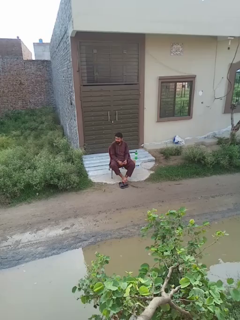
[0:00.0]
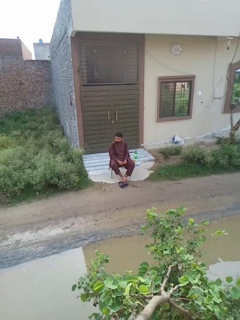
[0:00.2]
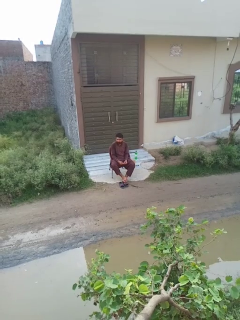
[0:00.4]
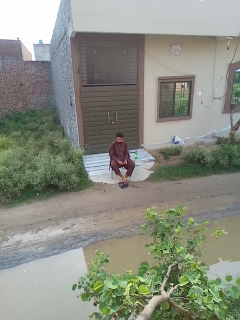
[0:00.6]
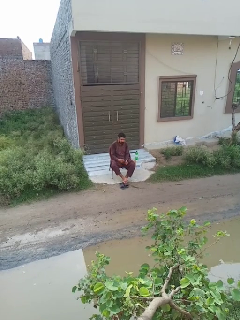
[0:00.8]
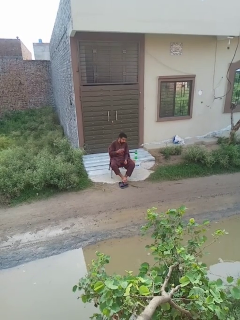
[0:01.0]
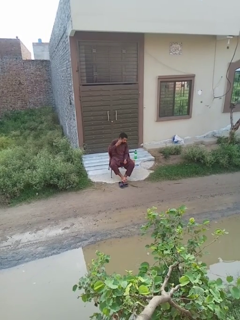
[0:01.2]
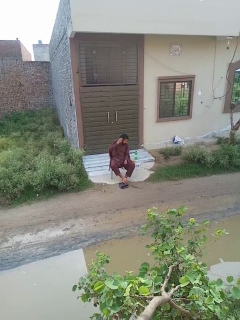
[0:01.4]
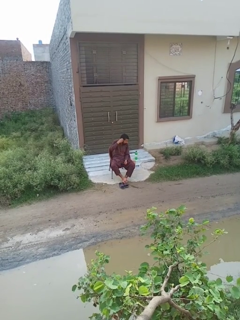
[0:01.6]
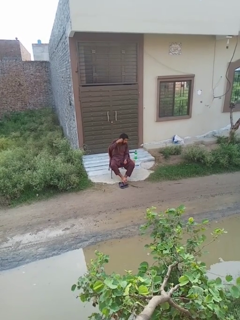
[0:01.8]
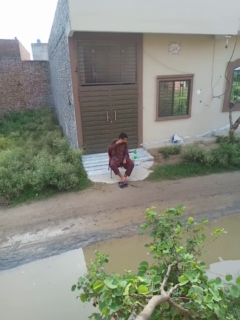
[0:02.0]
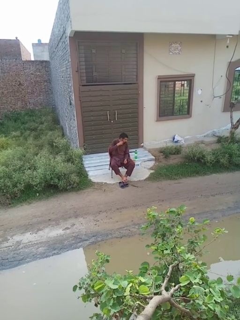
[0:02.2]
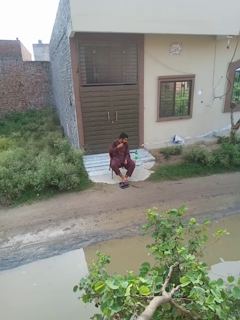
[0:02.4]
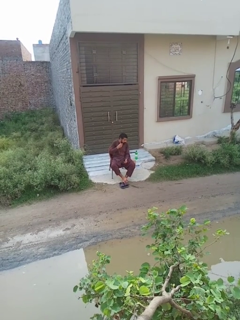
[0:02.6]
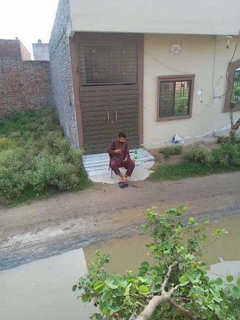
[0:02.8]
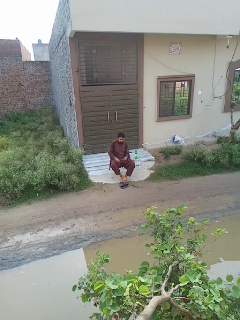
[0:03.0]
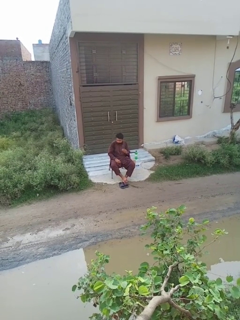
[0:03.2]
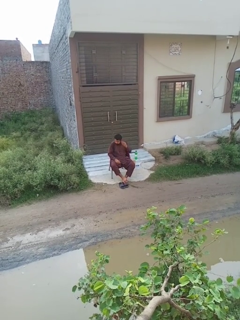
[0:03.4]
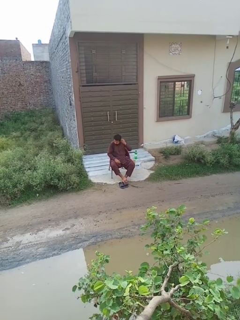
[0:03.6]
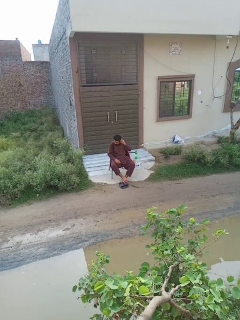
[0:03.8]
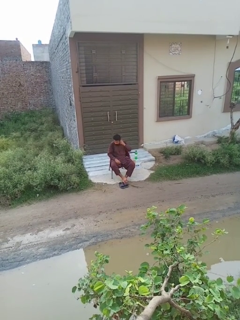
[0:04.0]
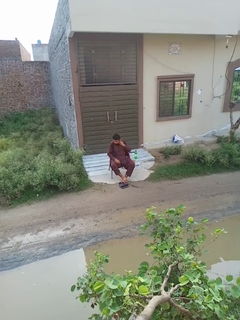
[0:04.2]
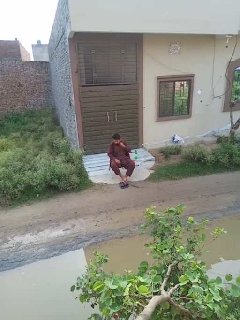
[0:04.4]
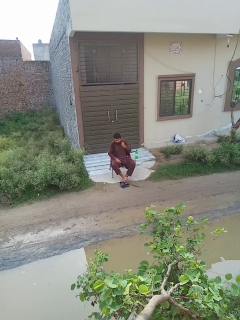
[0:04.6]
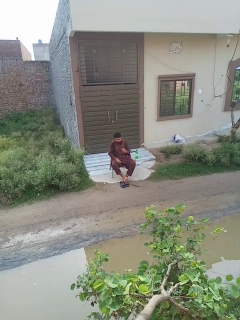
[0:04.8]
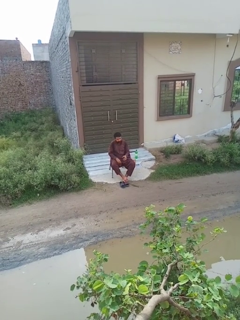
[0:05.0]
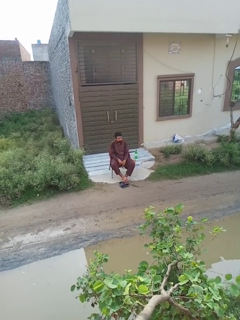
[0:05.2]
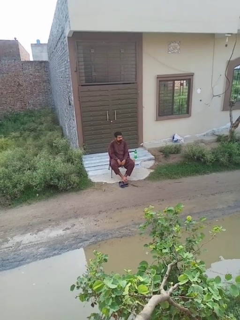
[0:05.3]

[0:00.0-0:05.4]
person puts on earrings

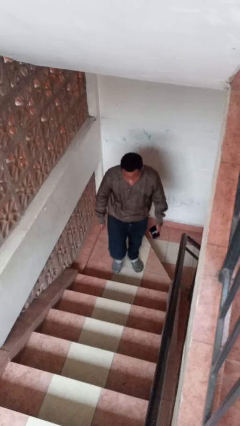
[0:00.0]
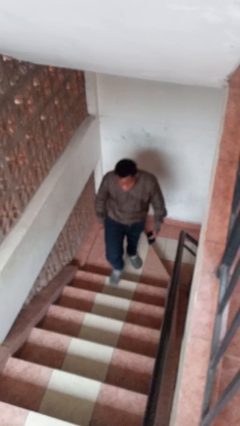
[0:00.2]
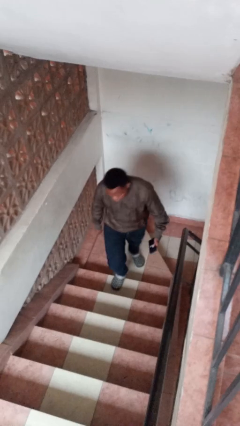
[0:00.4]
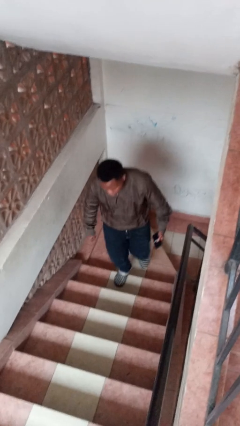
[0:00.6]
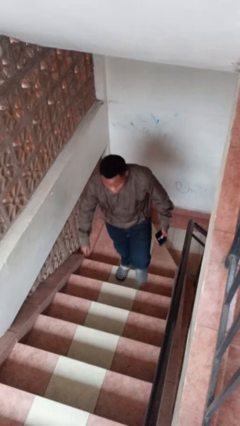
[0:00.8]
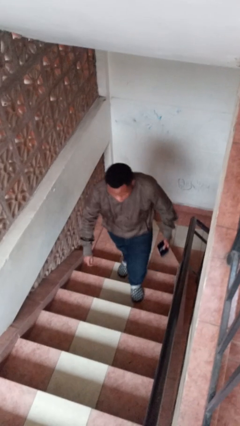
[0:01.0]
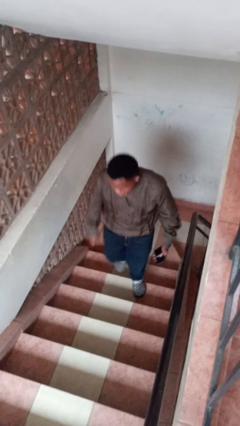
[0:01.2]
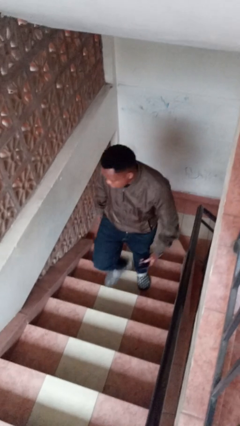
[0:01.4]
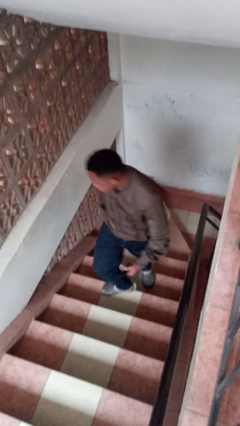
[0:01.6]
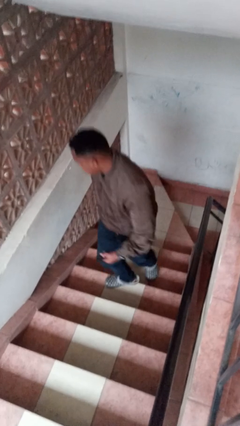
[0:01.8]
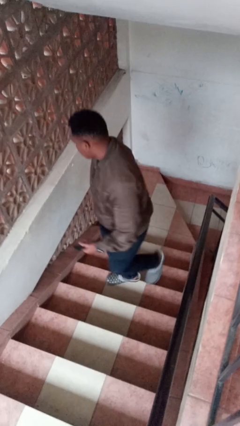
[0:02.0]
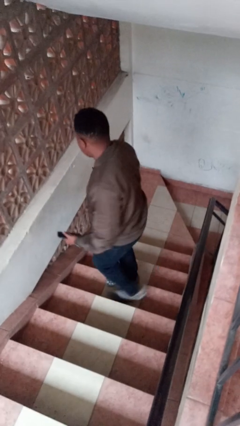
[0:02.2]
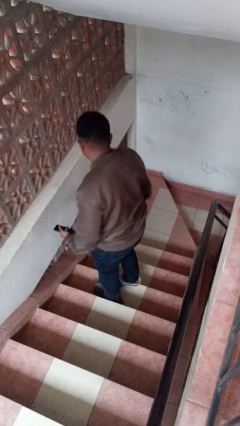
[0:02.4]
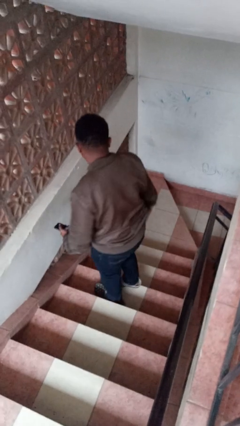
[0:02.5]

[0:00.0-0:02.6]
person climbs up stairs

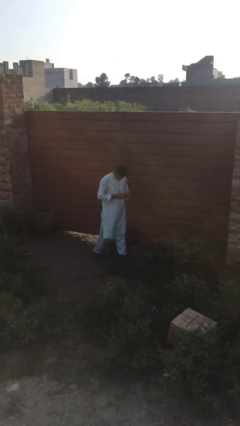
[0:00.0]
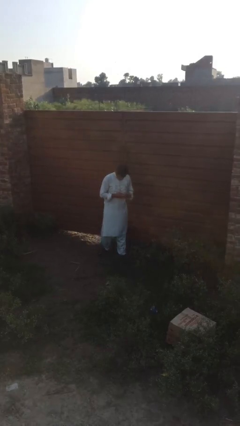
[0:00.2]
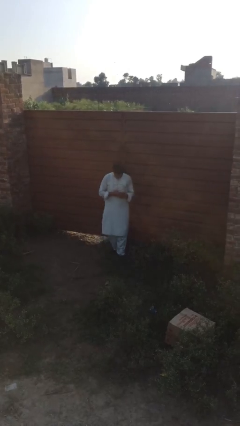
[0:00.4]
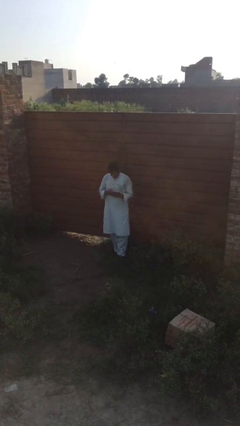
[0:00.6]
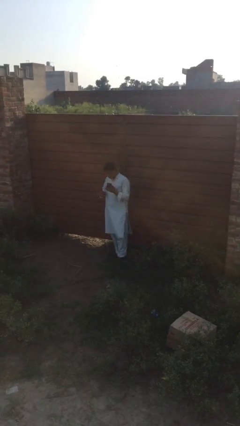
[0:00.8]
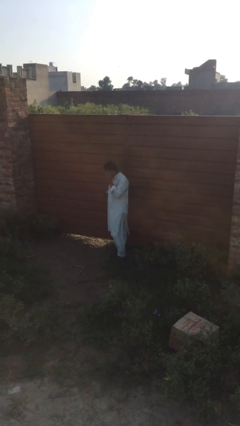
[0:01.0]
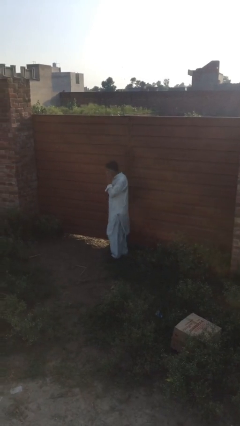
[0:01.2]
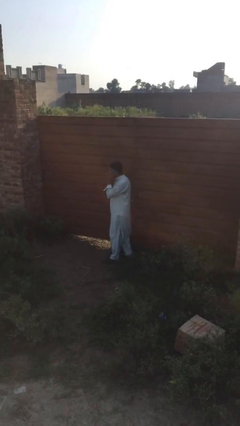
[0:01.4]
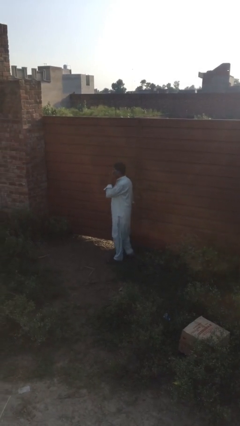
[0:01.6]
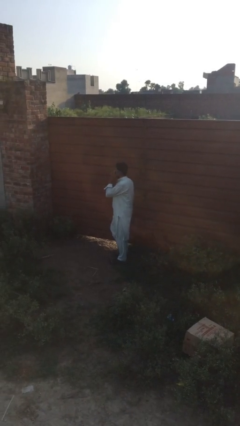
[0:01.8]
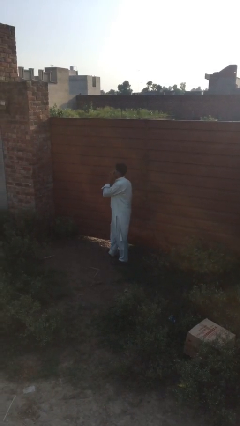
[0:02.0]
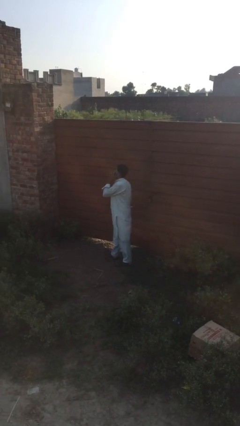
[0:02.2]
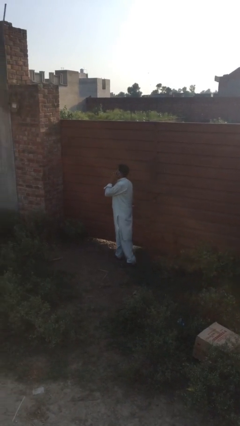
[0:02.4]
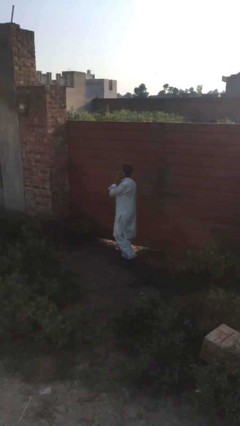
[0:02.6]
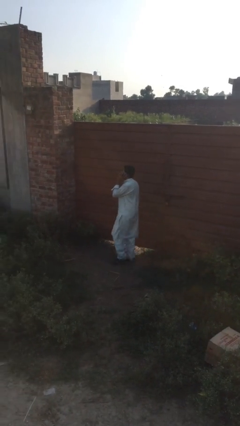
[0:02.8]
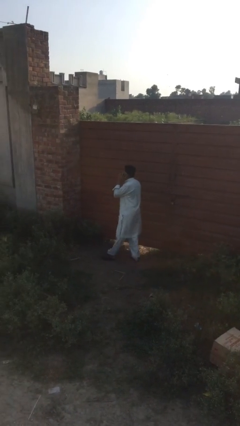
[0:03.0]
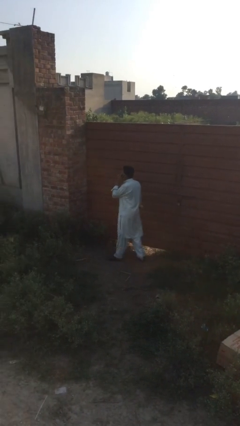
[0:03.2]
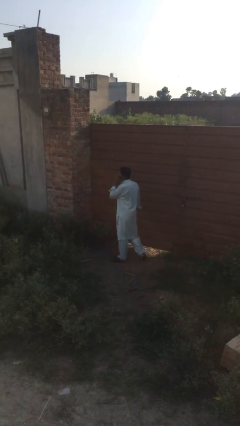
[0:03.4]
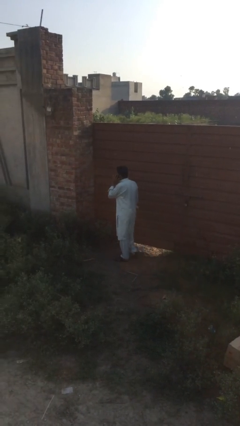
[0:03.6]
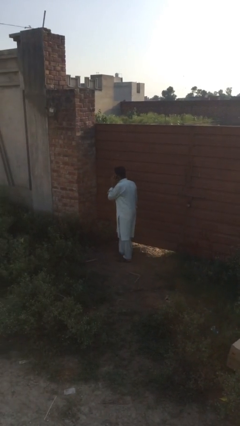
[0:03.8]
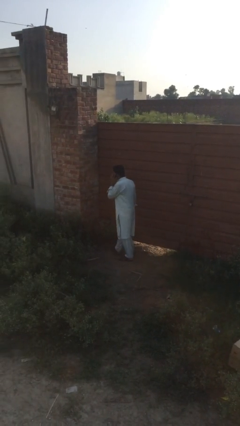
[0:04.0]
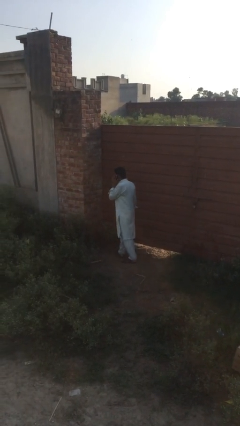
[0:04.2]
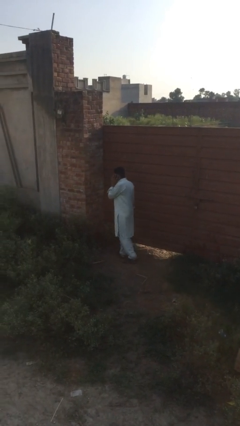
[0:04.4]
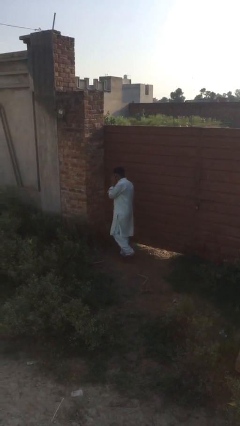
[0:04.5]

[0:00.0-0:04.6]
person talks on phone

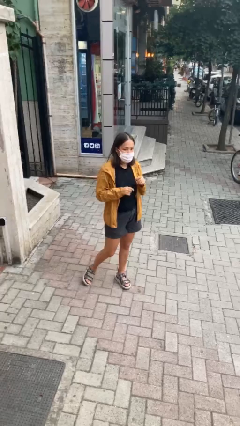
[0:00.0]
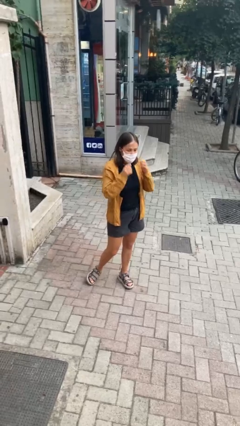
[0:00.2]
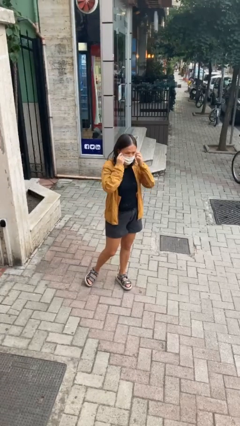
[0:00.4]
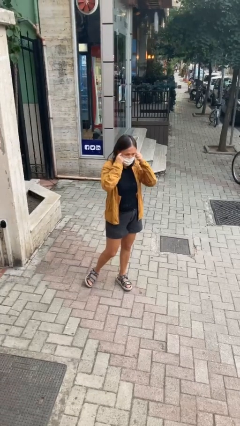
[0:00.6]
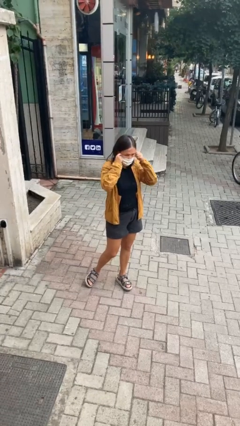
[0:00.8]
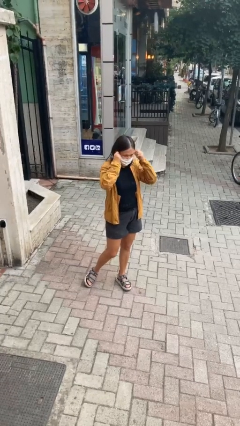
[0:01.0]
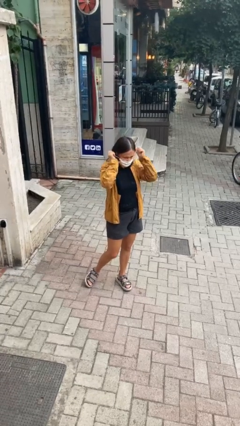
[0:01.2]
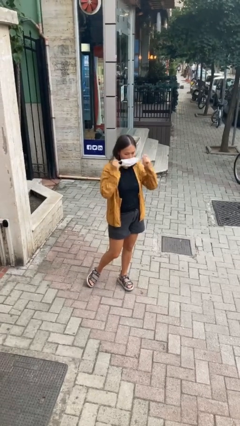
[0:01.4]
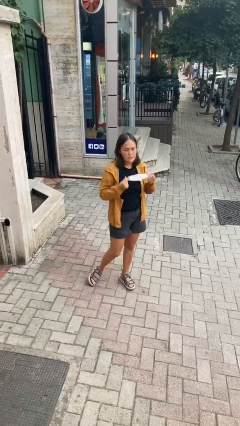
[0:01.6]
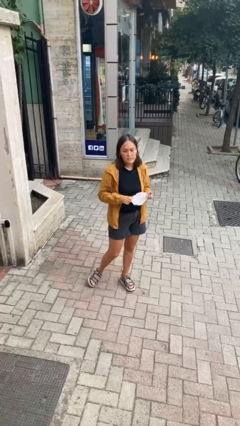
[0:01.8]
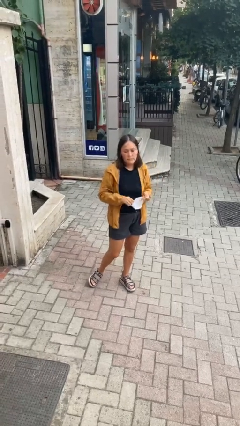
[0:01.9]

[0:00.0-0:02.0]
person takes off facemask

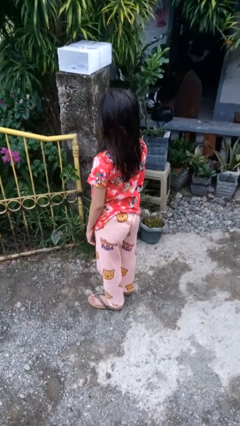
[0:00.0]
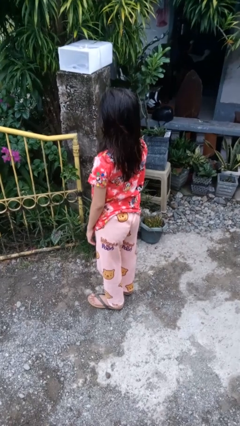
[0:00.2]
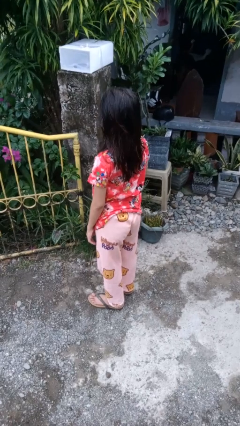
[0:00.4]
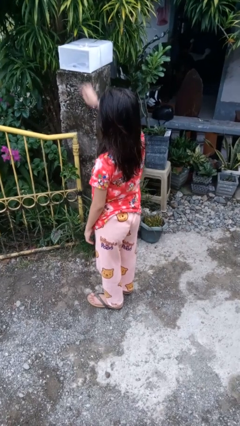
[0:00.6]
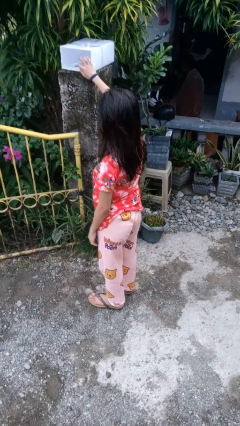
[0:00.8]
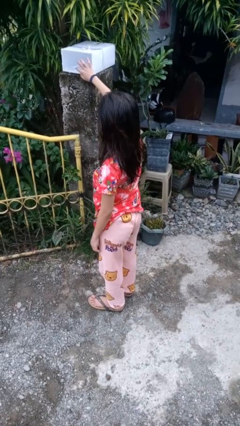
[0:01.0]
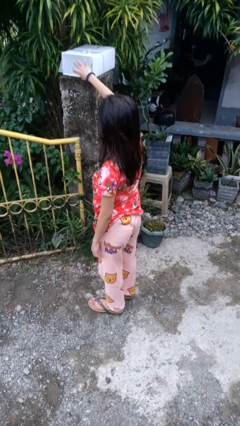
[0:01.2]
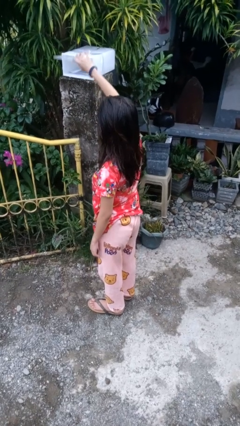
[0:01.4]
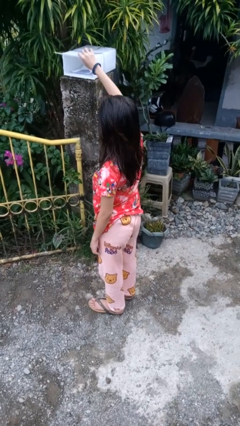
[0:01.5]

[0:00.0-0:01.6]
person opens mailbox

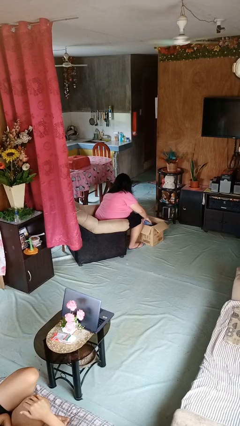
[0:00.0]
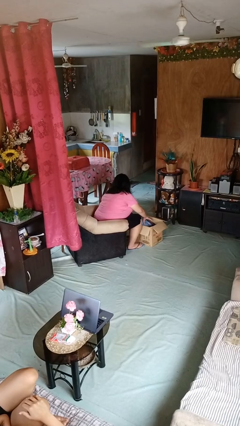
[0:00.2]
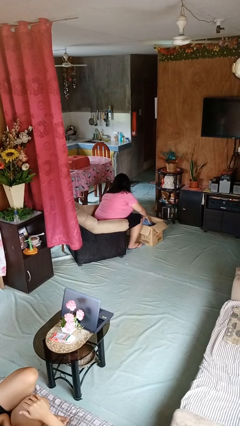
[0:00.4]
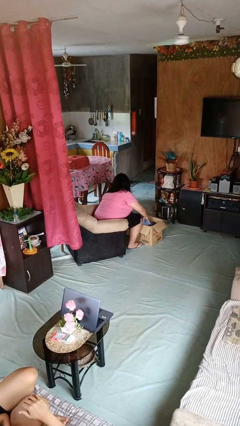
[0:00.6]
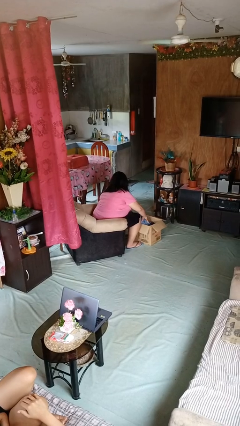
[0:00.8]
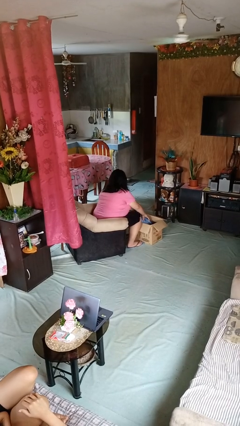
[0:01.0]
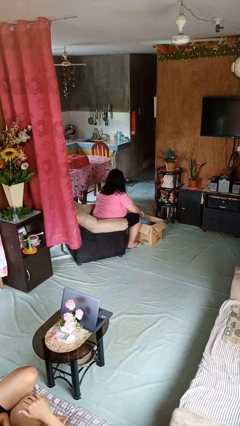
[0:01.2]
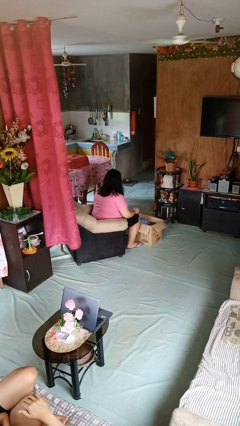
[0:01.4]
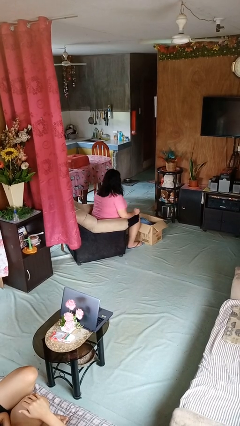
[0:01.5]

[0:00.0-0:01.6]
person searches in box

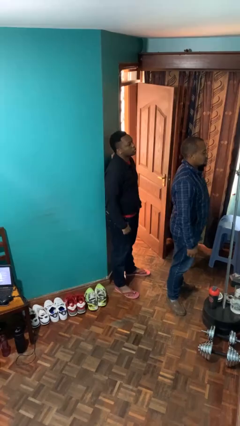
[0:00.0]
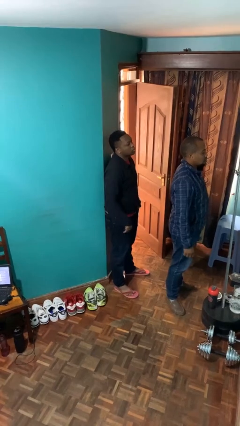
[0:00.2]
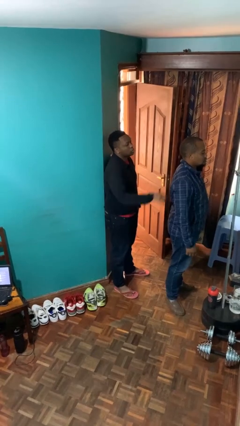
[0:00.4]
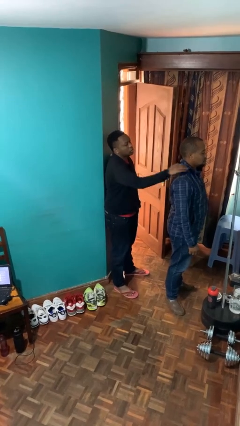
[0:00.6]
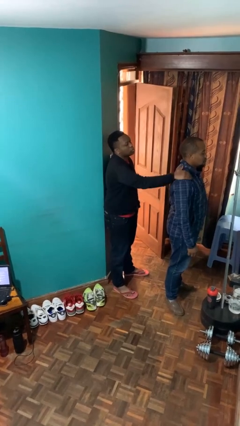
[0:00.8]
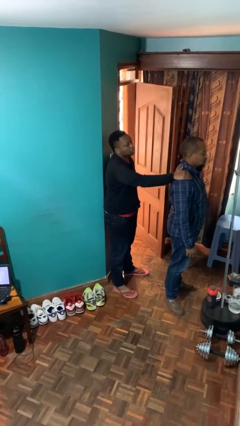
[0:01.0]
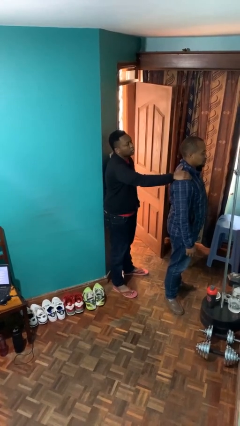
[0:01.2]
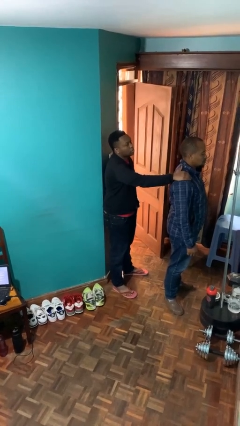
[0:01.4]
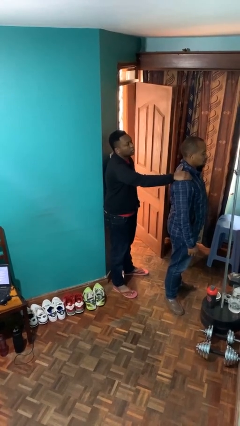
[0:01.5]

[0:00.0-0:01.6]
person grabs person by shoulder
